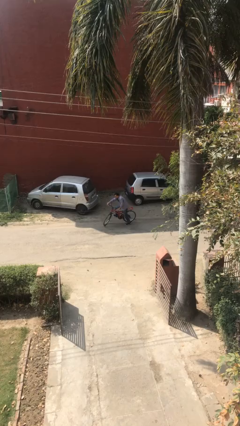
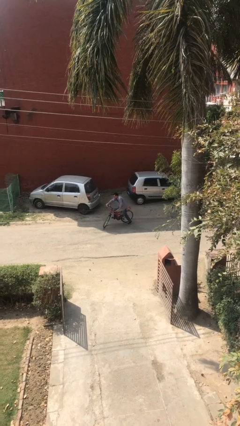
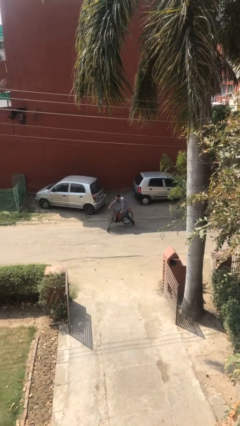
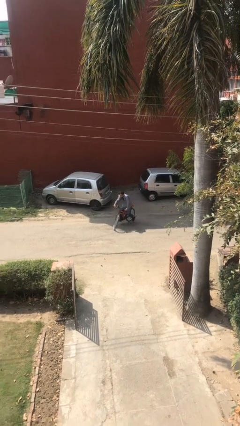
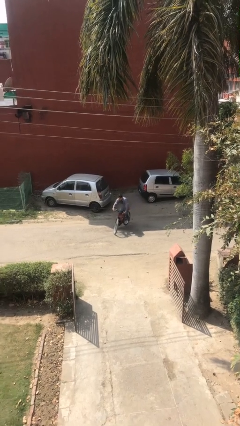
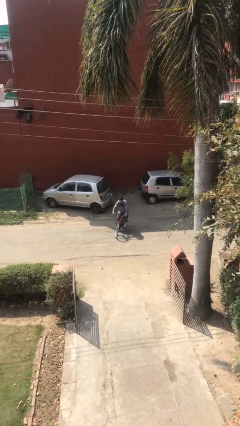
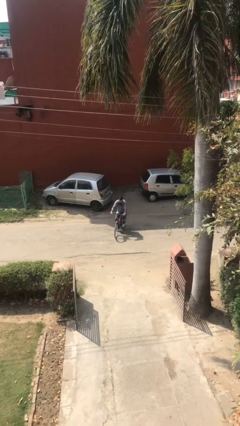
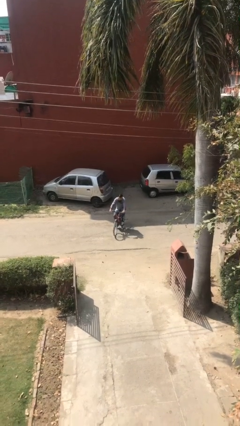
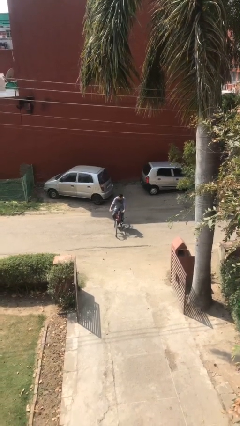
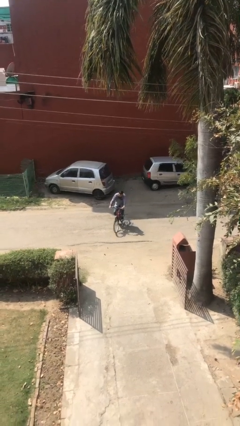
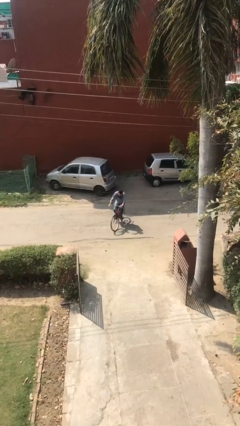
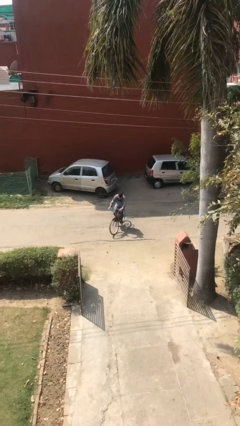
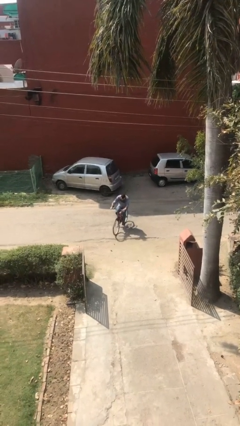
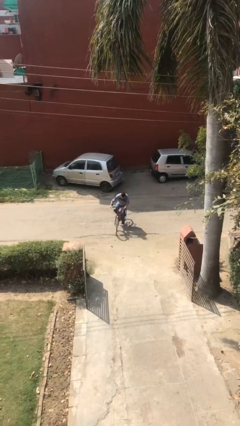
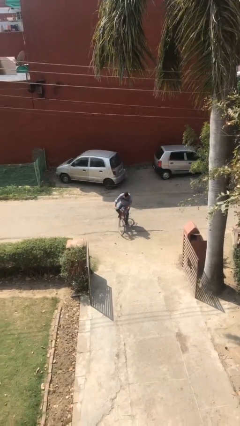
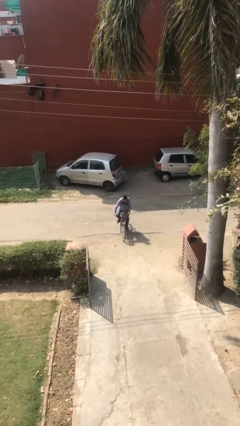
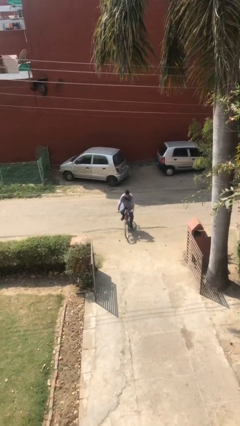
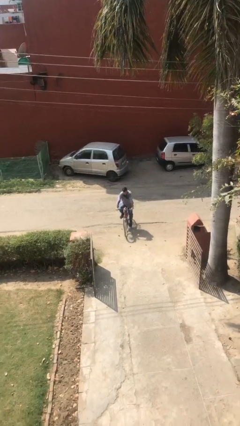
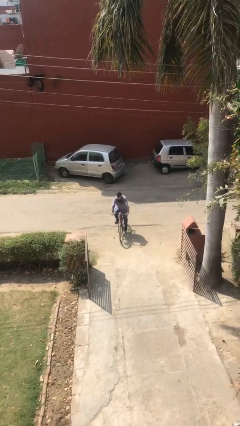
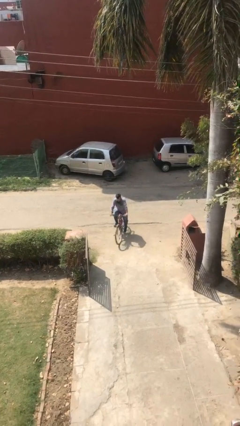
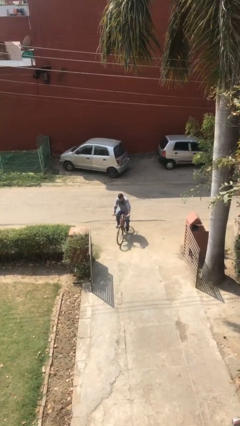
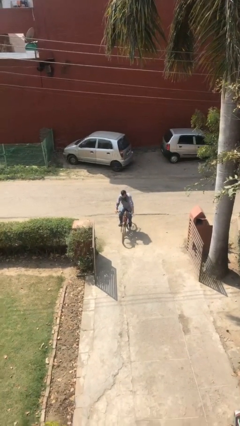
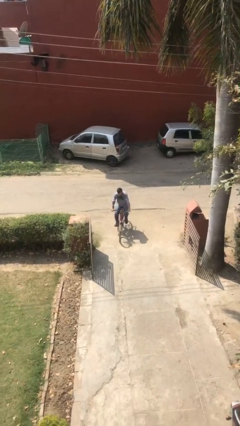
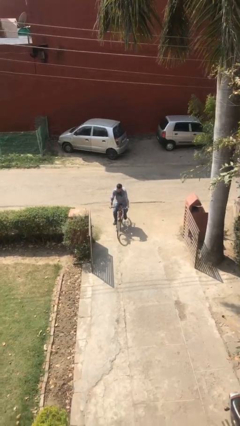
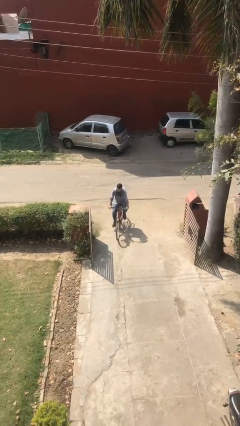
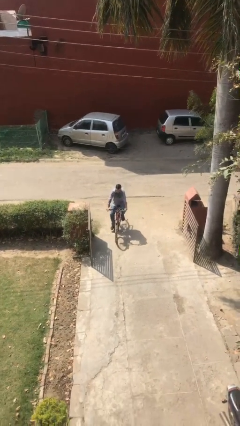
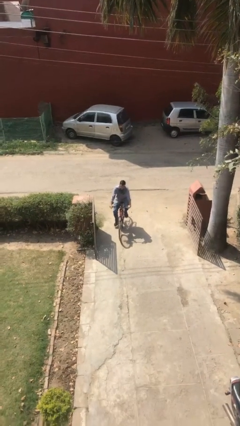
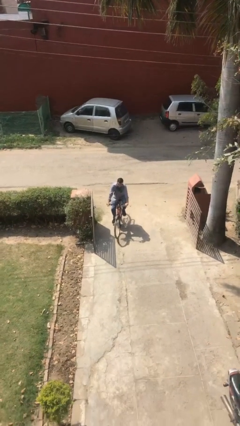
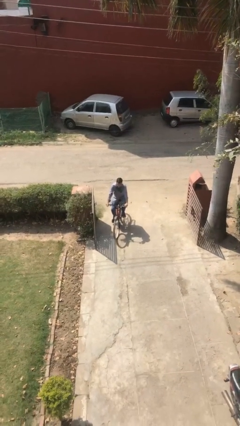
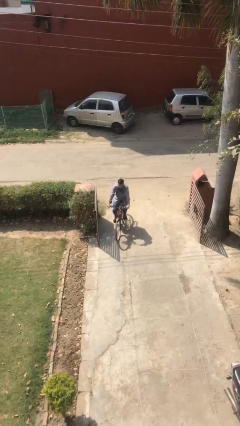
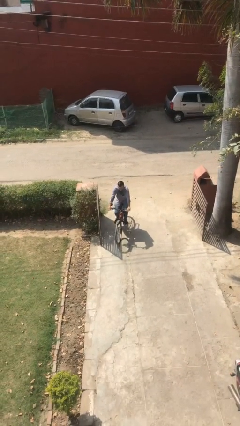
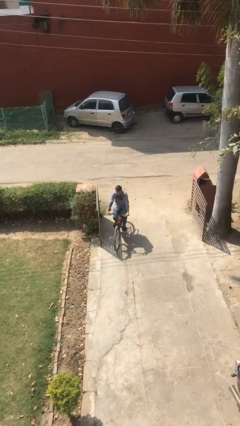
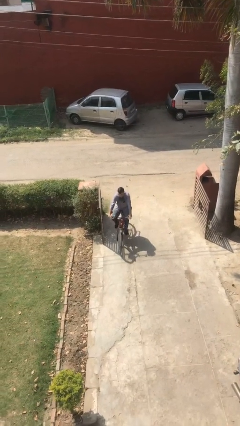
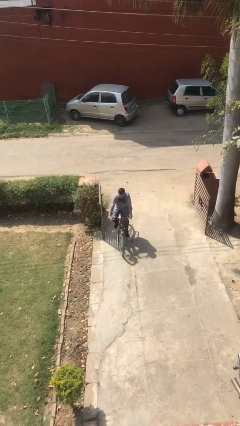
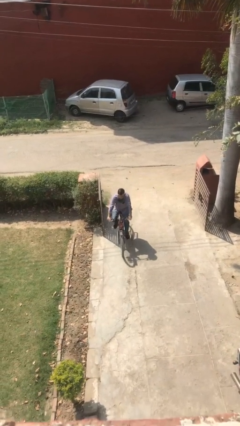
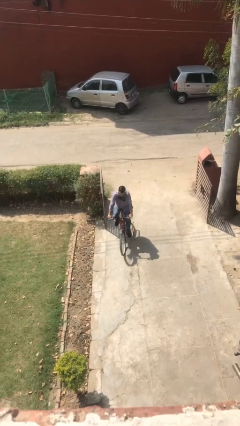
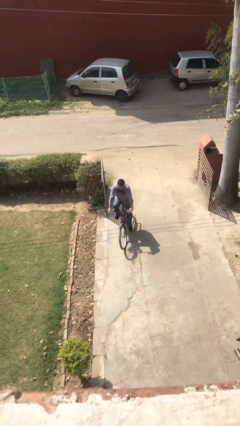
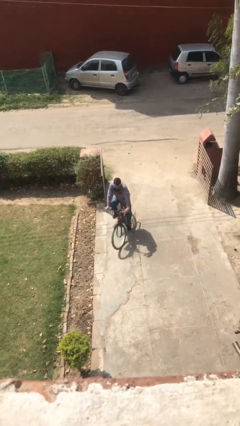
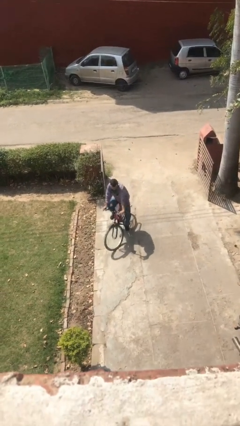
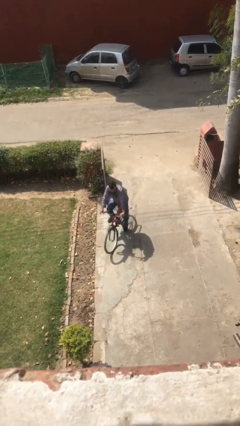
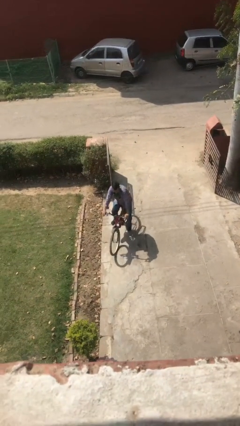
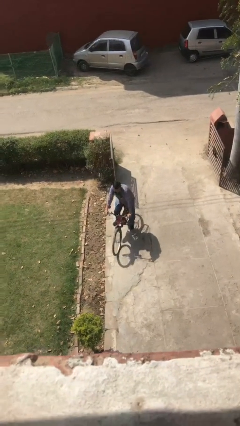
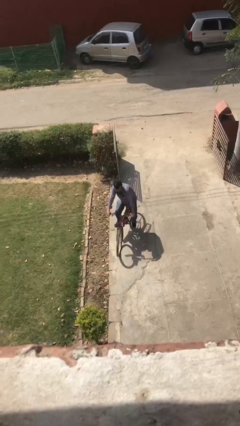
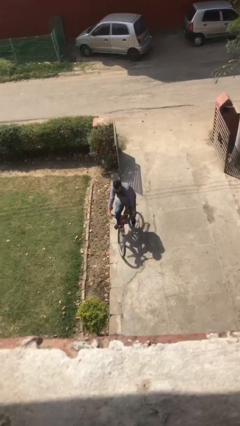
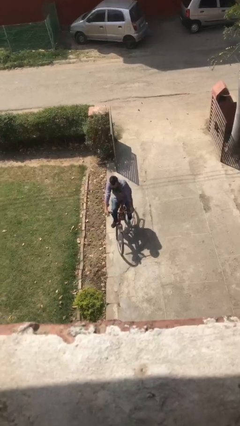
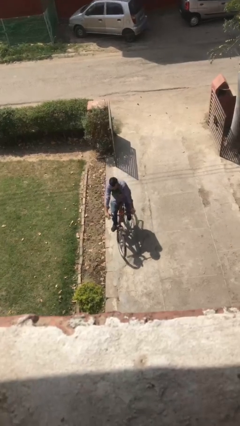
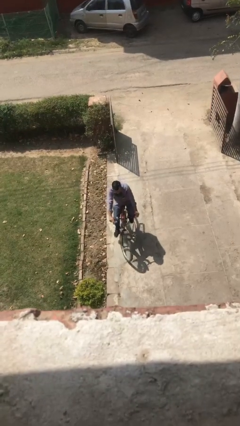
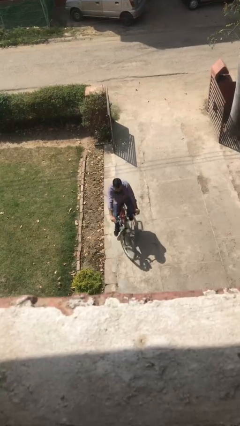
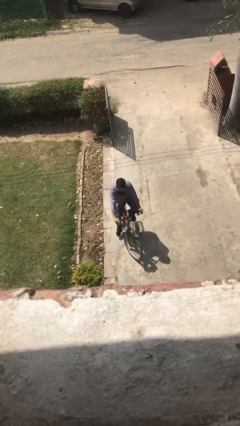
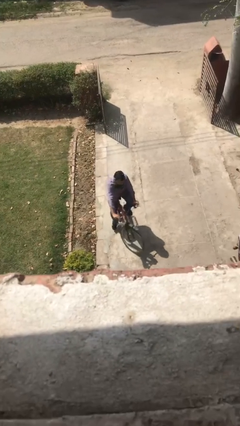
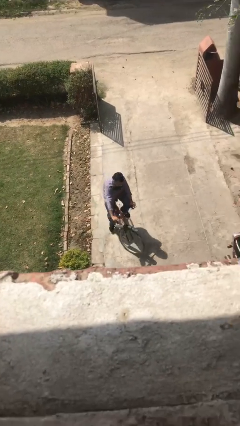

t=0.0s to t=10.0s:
person rides bicycle

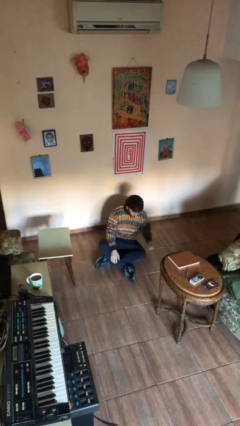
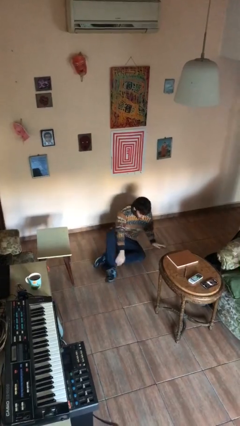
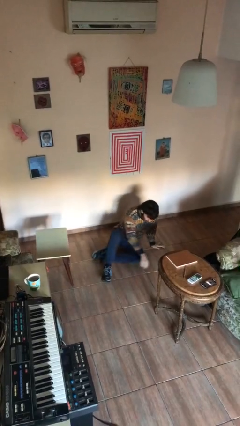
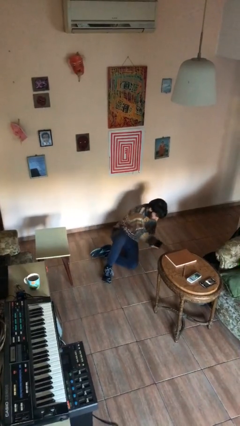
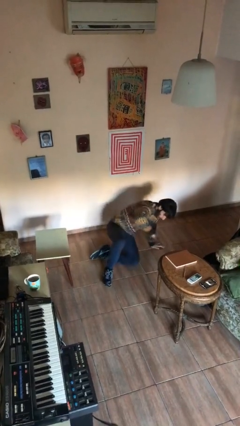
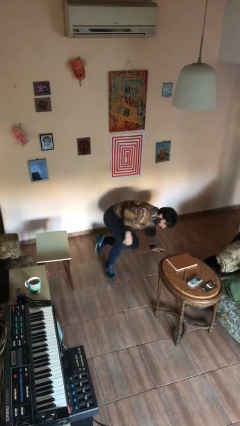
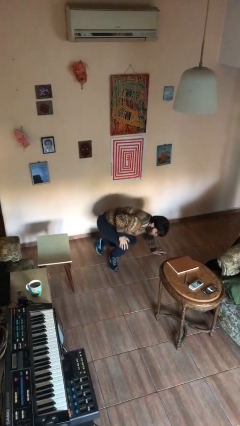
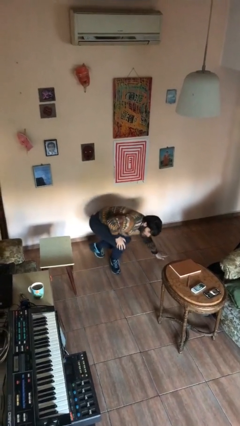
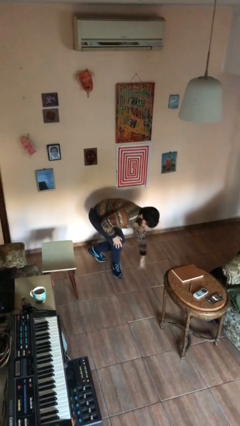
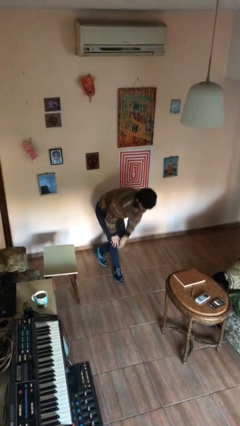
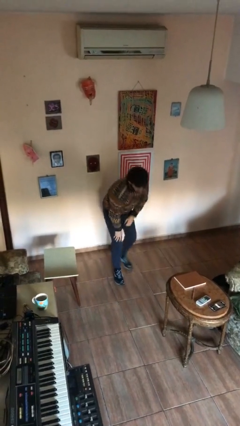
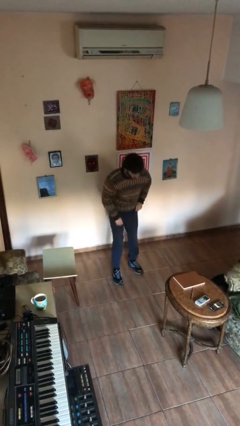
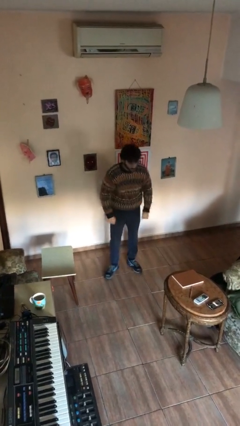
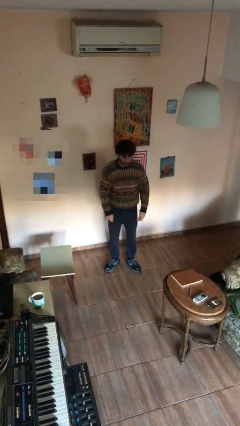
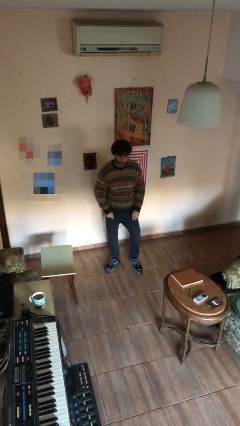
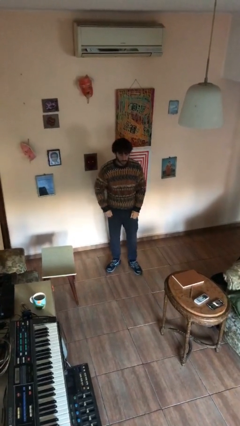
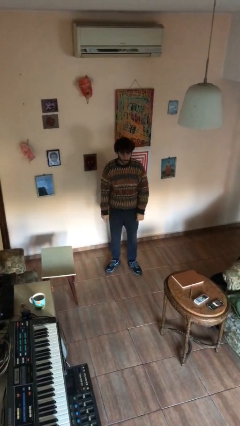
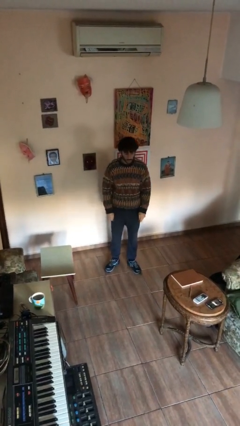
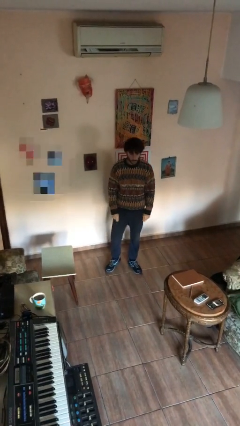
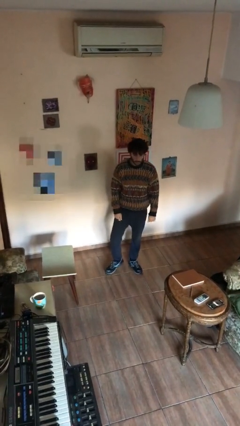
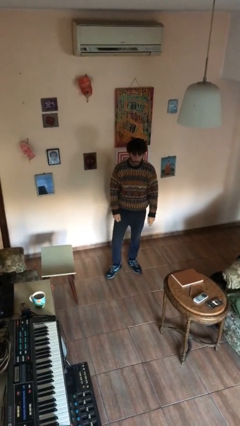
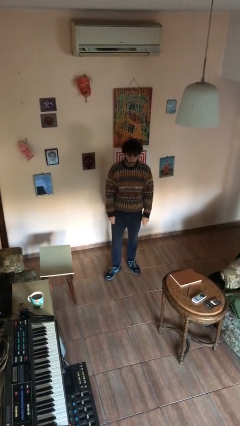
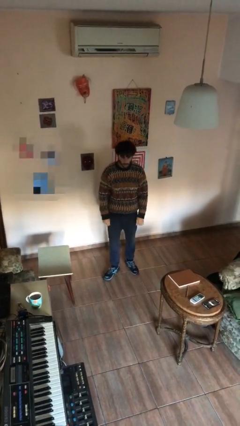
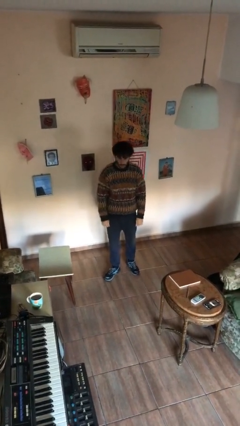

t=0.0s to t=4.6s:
person stands up from floor

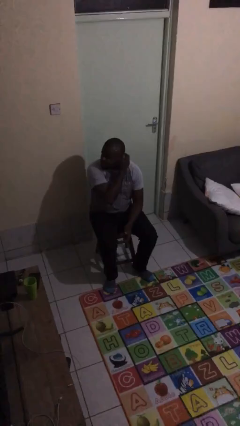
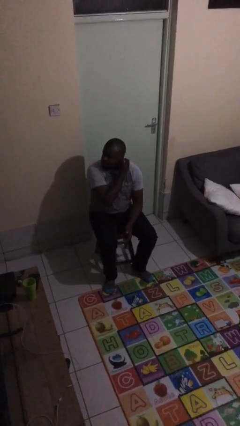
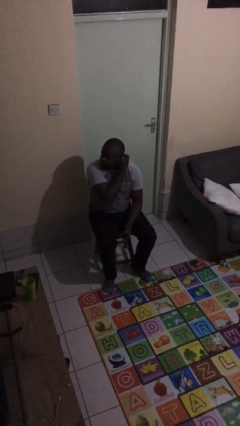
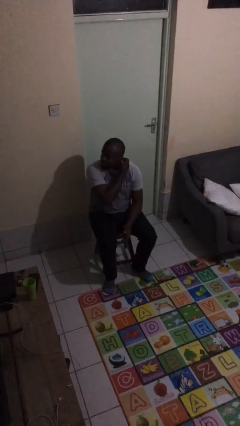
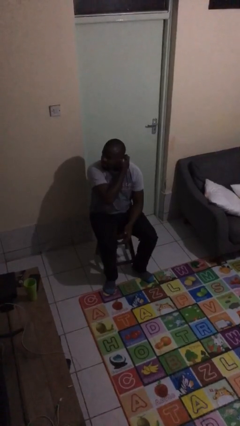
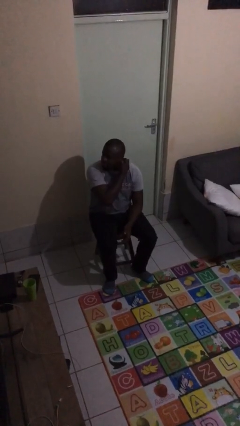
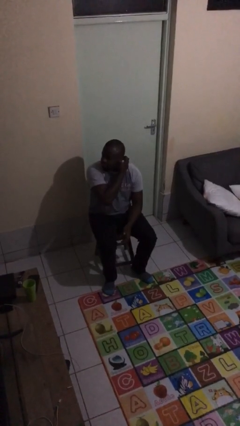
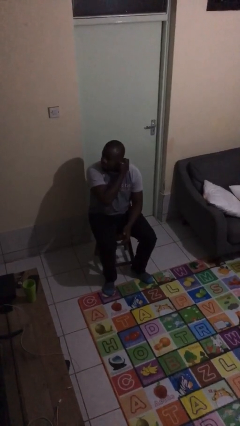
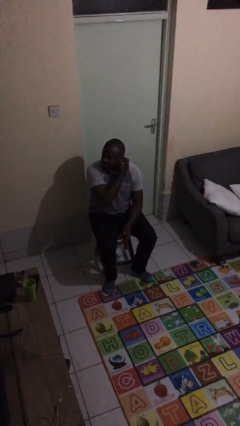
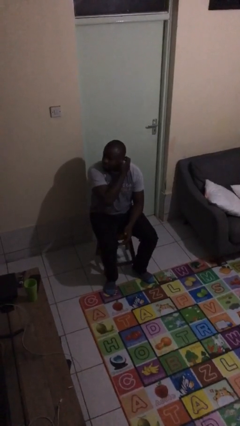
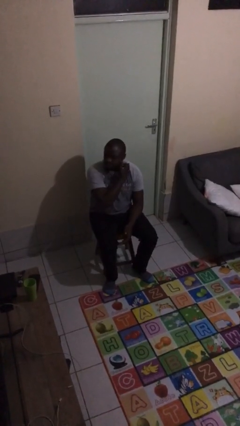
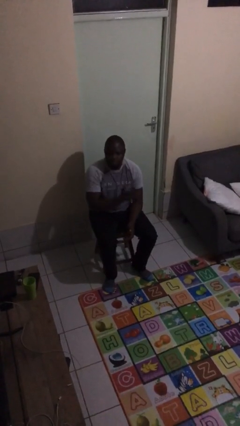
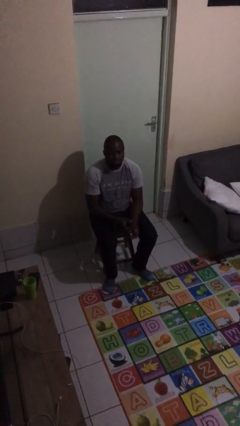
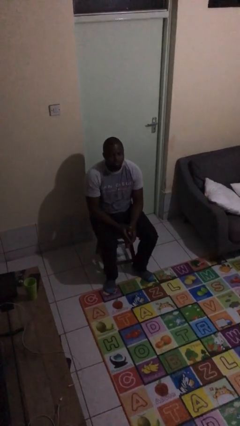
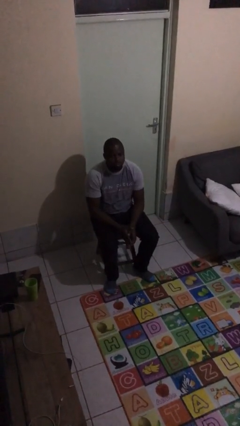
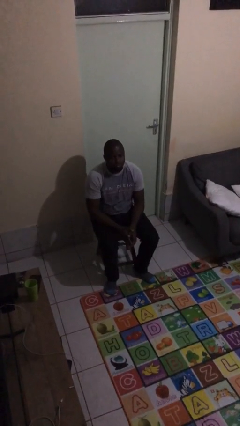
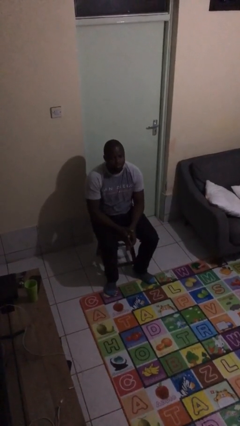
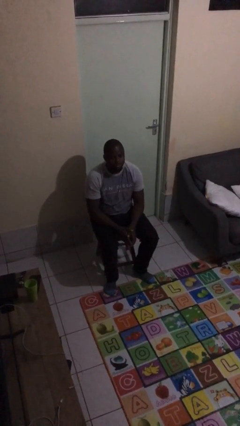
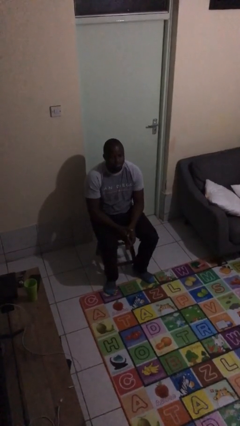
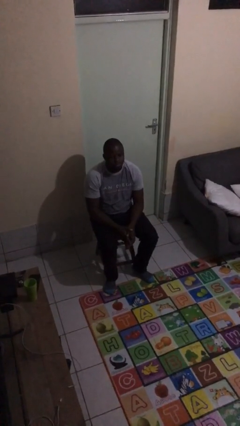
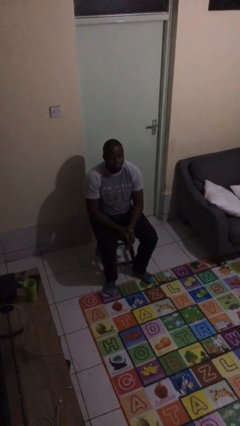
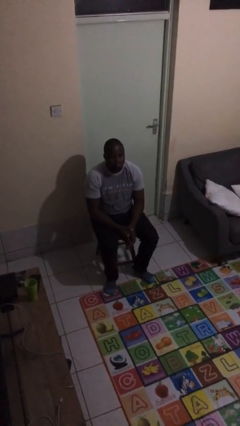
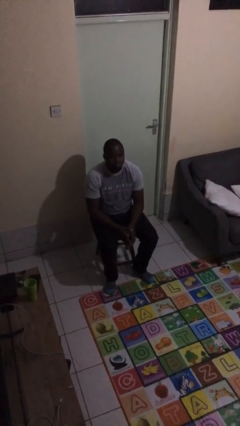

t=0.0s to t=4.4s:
person scratches face
